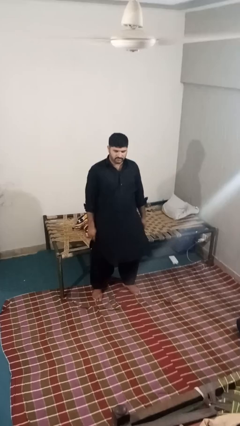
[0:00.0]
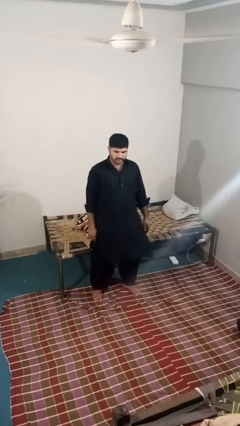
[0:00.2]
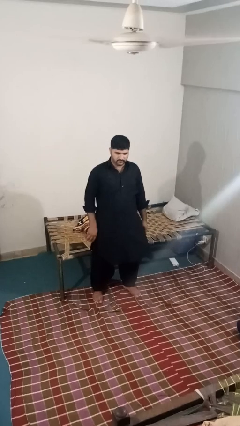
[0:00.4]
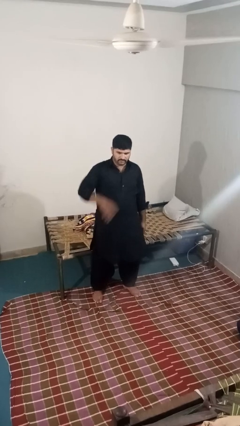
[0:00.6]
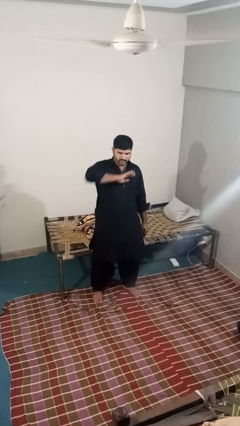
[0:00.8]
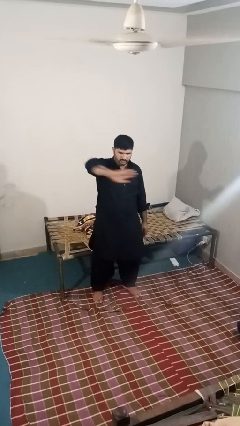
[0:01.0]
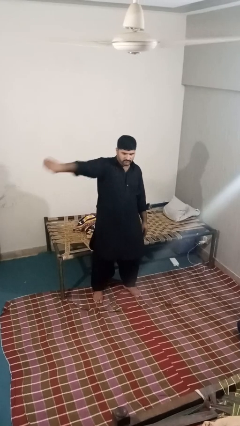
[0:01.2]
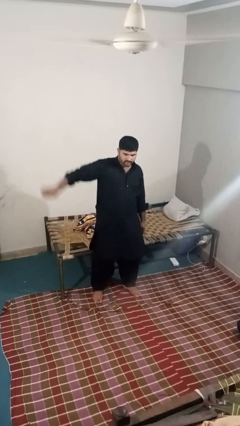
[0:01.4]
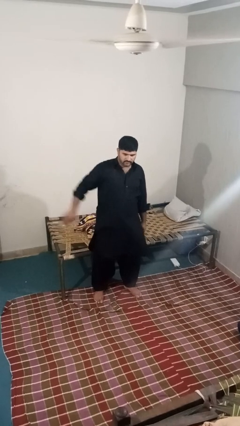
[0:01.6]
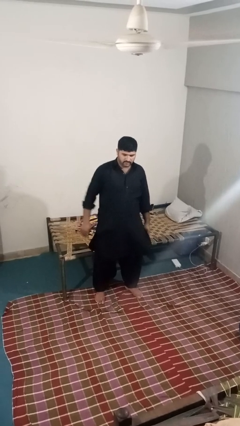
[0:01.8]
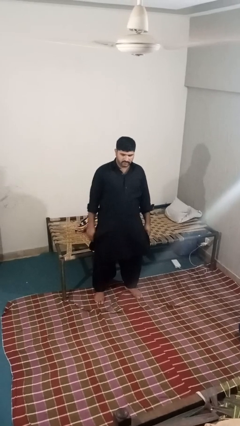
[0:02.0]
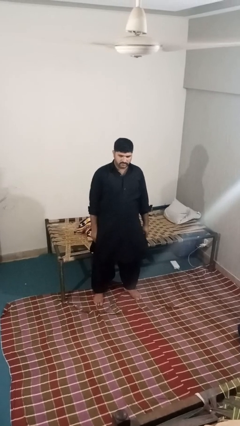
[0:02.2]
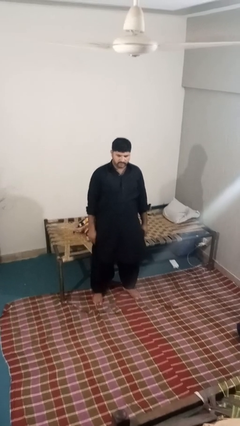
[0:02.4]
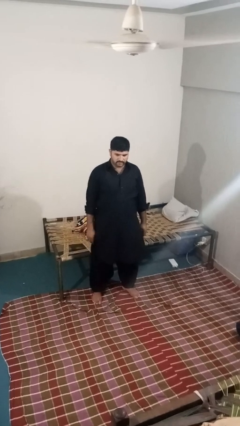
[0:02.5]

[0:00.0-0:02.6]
person gestures swipe right

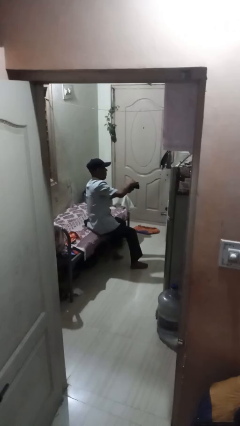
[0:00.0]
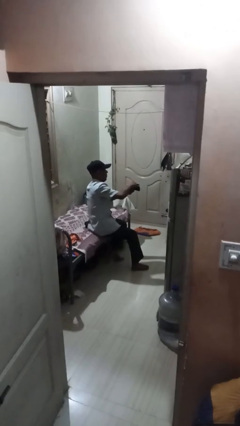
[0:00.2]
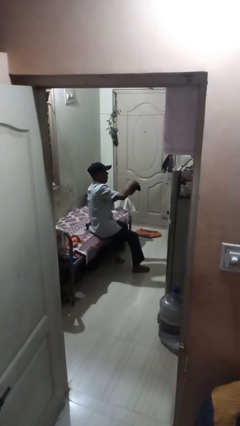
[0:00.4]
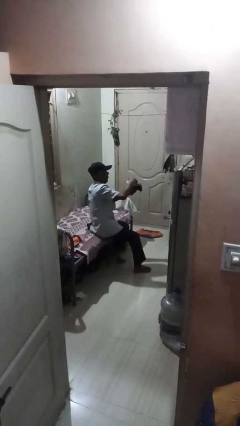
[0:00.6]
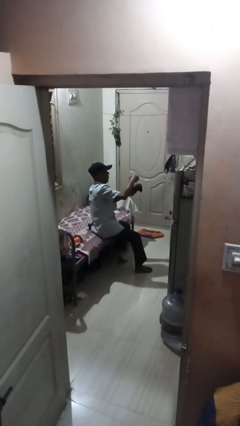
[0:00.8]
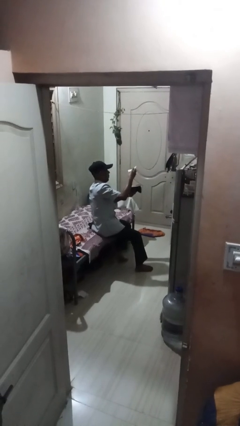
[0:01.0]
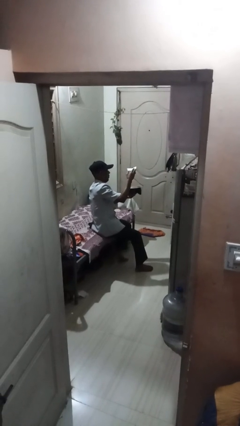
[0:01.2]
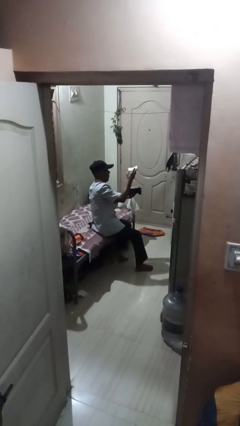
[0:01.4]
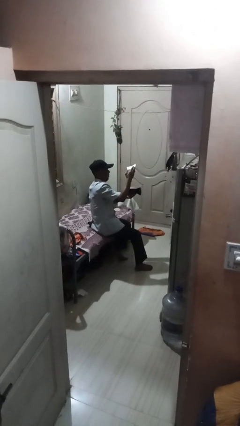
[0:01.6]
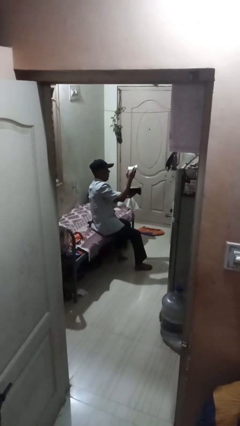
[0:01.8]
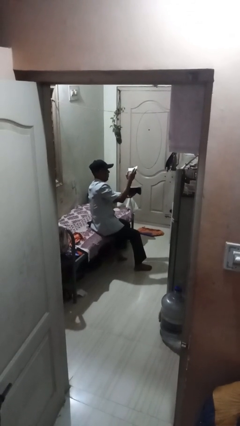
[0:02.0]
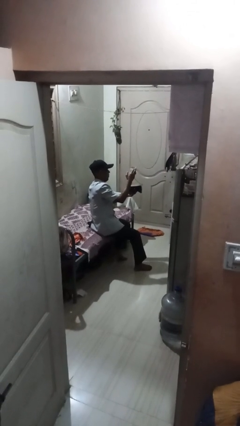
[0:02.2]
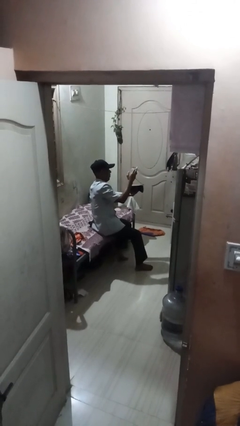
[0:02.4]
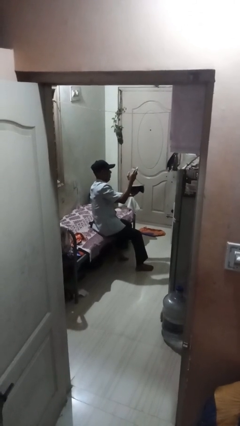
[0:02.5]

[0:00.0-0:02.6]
person takes object from purse

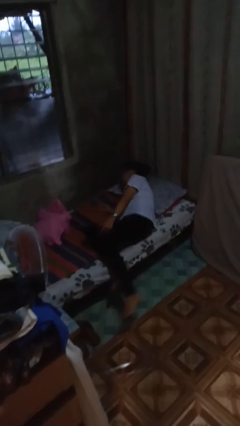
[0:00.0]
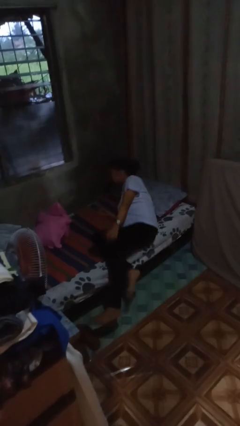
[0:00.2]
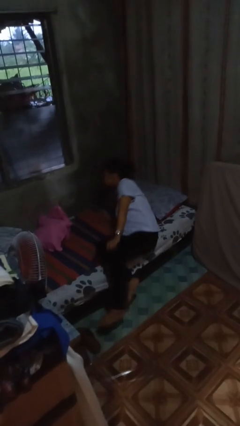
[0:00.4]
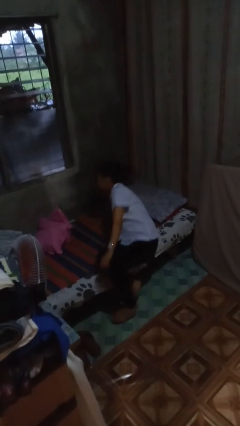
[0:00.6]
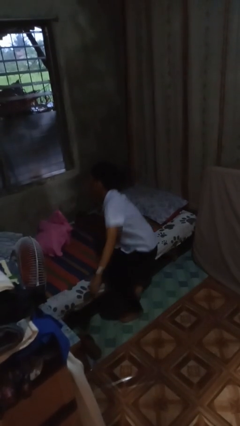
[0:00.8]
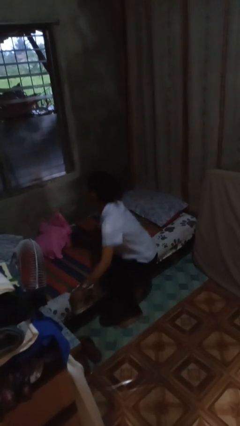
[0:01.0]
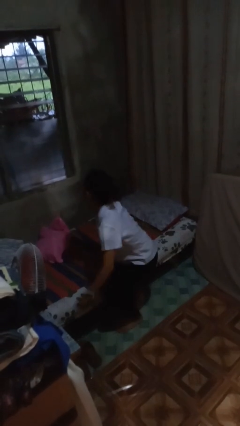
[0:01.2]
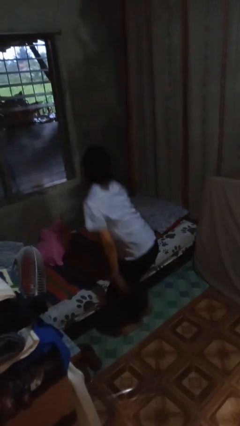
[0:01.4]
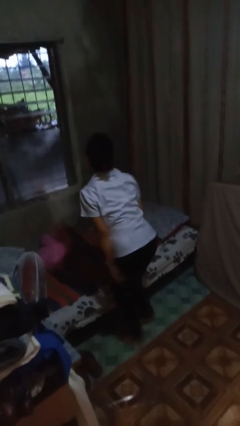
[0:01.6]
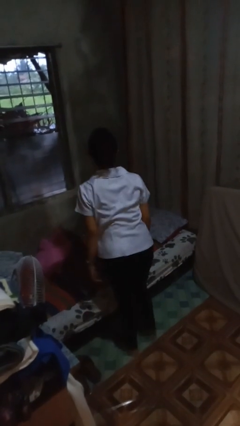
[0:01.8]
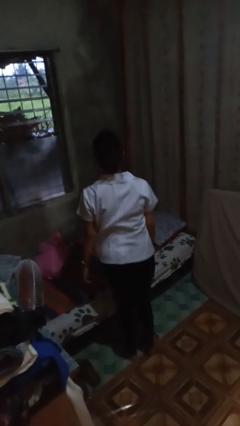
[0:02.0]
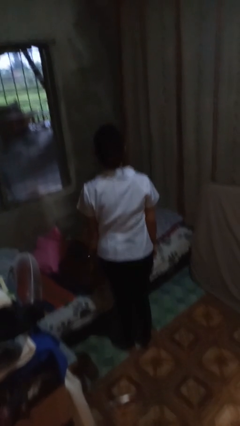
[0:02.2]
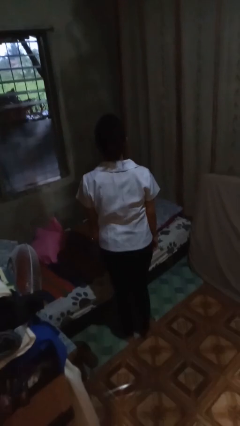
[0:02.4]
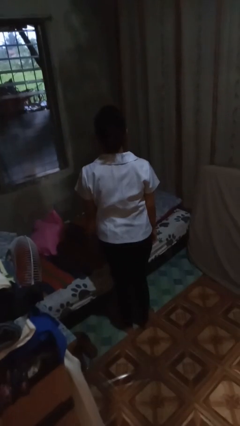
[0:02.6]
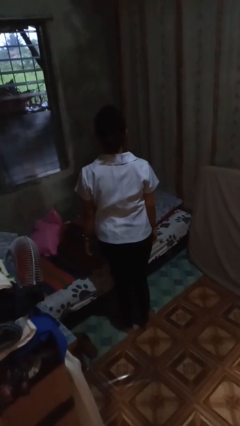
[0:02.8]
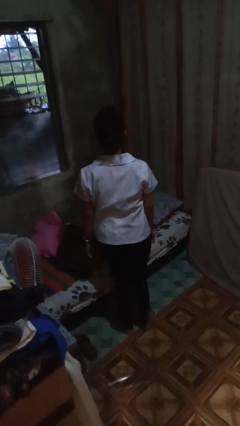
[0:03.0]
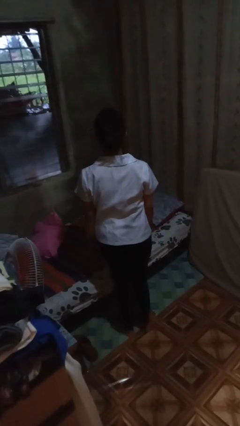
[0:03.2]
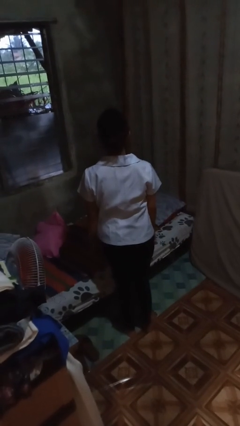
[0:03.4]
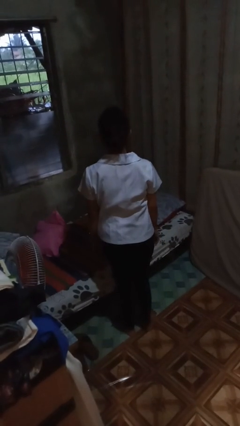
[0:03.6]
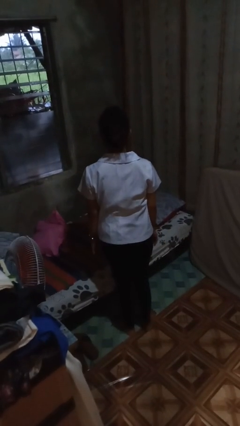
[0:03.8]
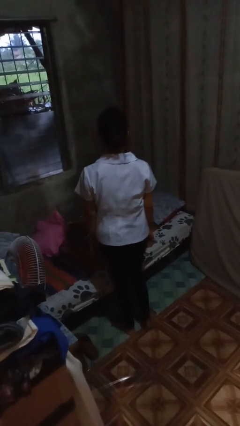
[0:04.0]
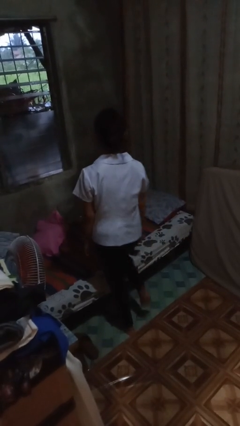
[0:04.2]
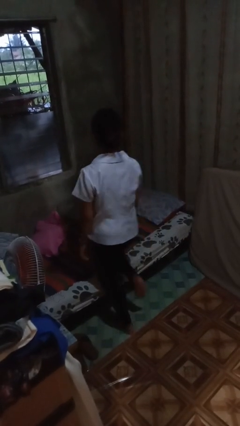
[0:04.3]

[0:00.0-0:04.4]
person stands up

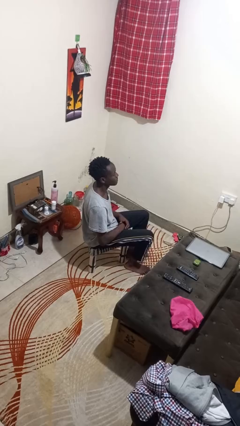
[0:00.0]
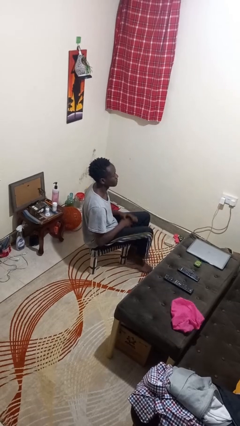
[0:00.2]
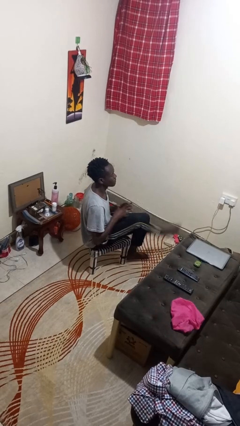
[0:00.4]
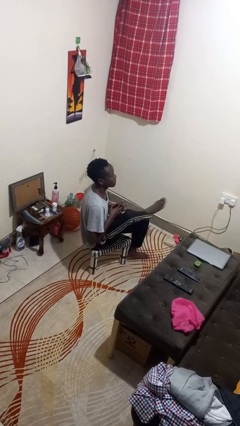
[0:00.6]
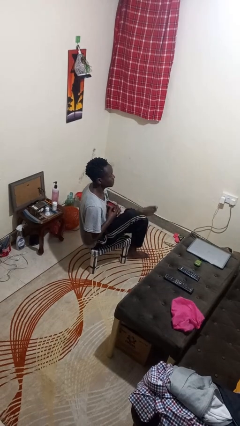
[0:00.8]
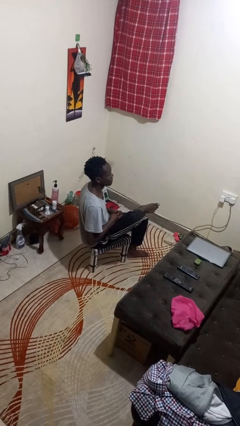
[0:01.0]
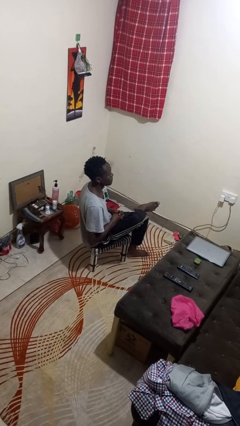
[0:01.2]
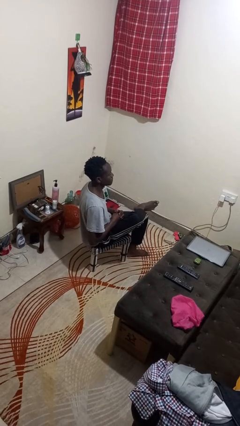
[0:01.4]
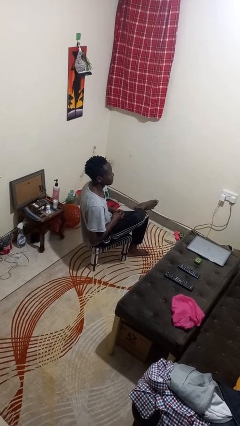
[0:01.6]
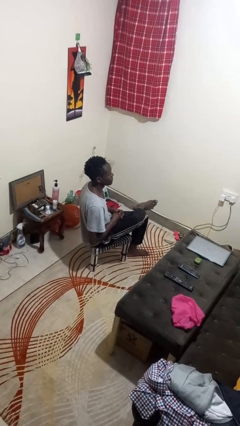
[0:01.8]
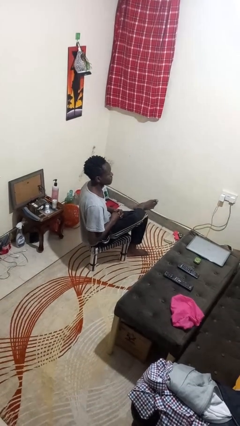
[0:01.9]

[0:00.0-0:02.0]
person crosses legs

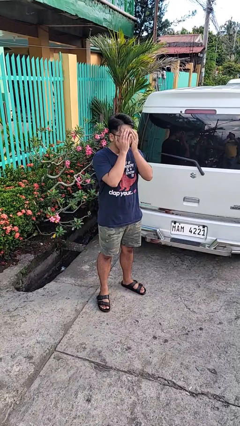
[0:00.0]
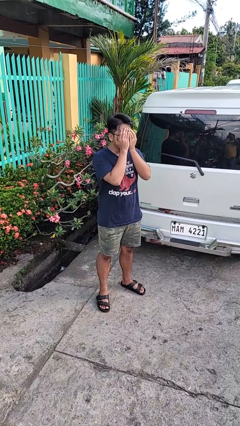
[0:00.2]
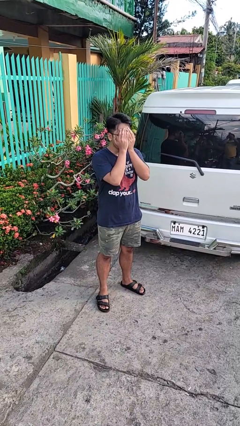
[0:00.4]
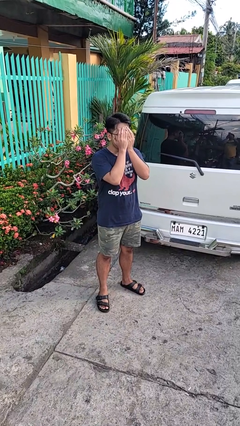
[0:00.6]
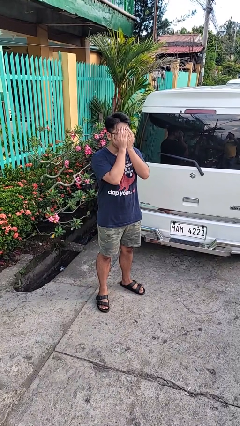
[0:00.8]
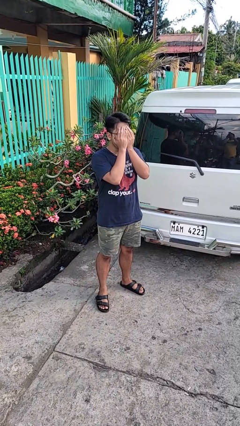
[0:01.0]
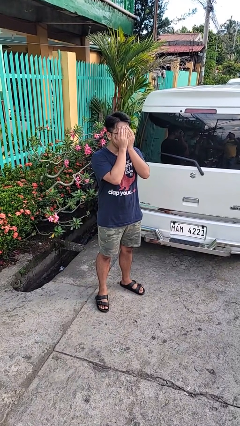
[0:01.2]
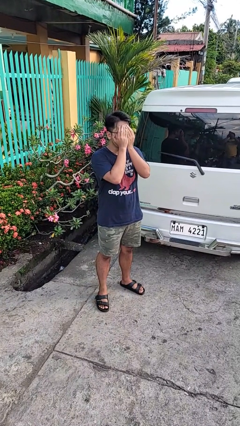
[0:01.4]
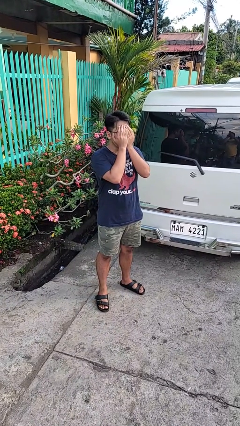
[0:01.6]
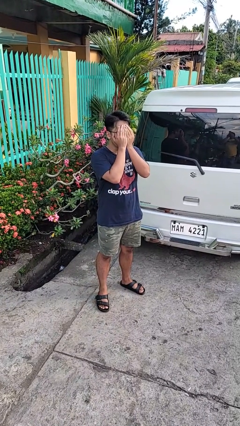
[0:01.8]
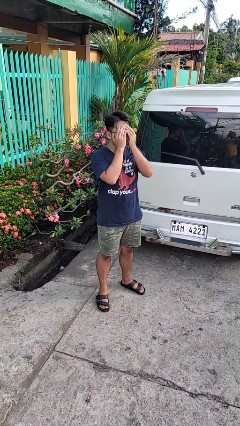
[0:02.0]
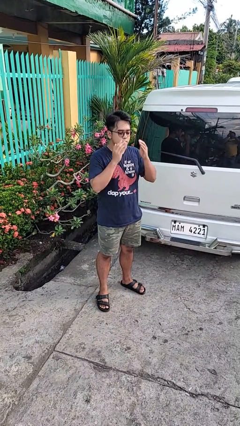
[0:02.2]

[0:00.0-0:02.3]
person covers face with hands

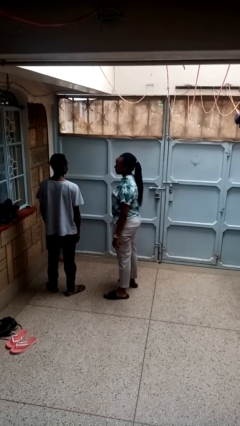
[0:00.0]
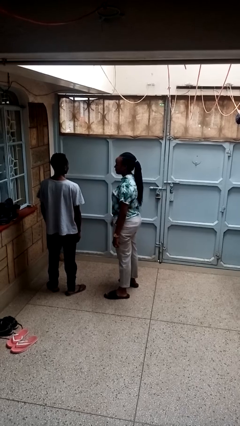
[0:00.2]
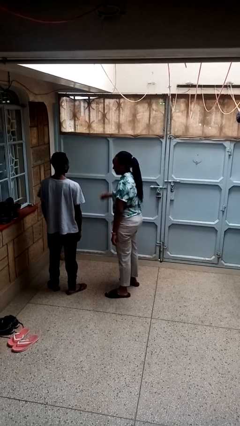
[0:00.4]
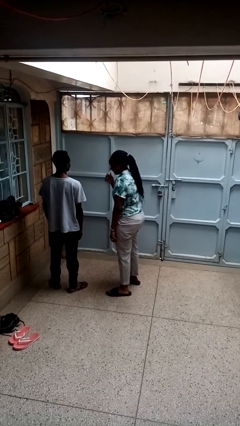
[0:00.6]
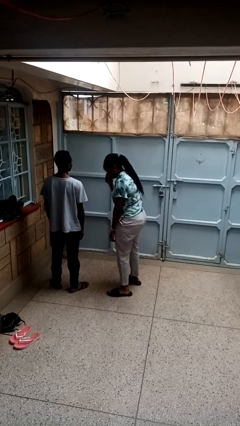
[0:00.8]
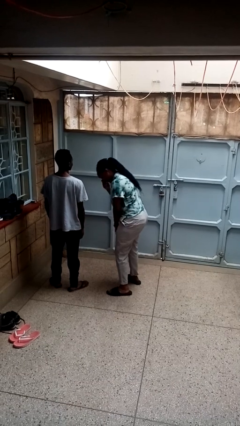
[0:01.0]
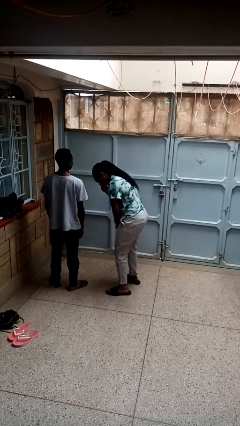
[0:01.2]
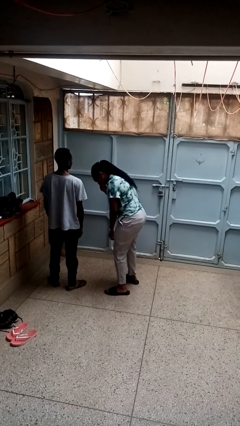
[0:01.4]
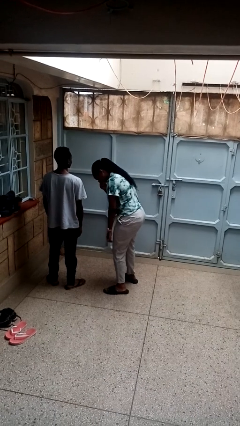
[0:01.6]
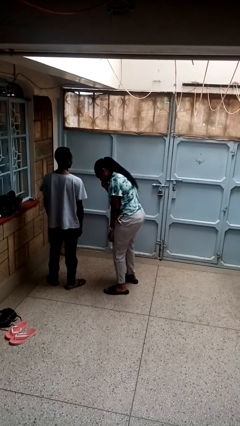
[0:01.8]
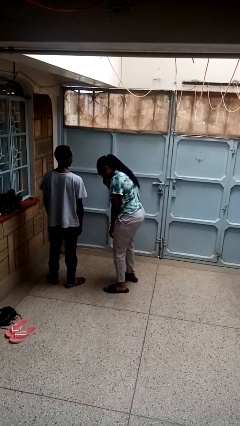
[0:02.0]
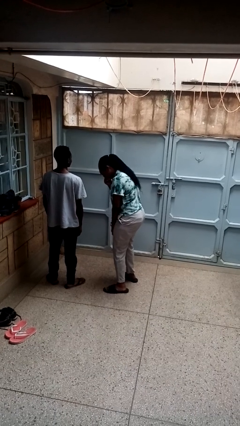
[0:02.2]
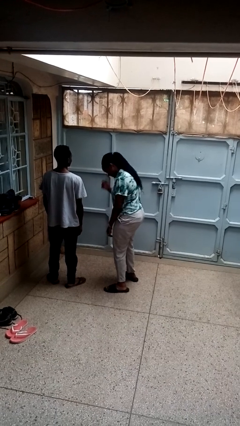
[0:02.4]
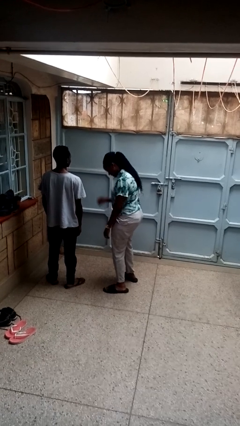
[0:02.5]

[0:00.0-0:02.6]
person laughs with person

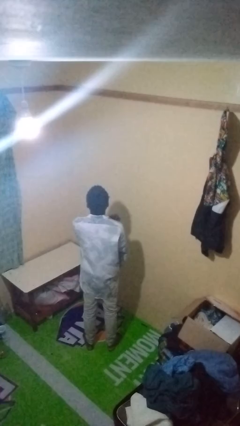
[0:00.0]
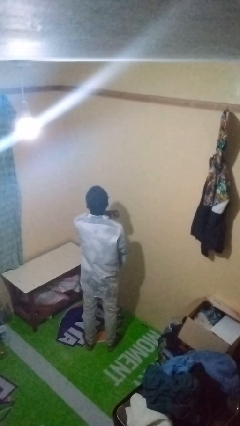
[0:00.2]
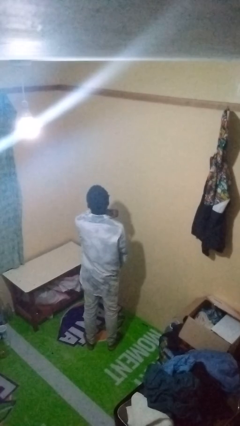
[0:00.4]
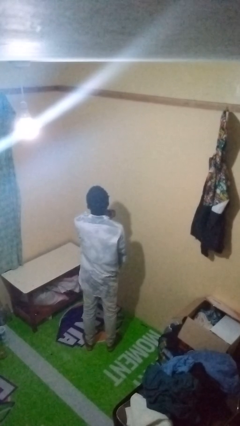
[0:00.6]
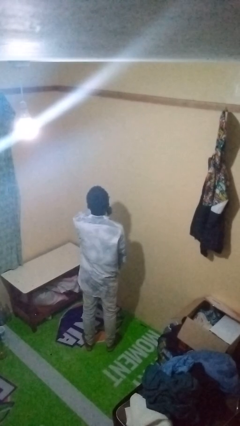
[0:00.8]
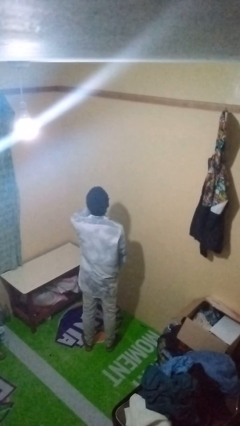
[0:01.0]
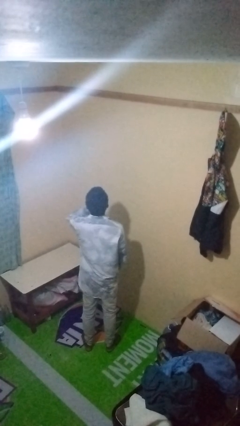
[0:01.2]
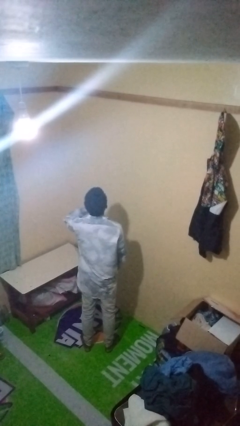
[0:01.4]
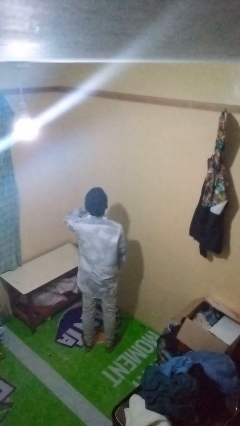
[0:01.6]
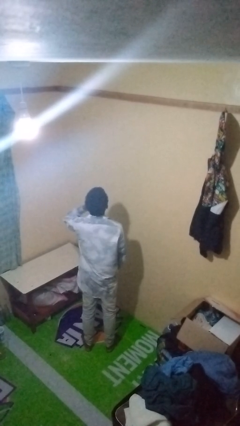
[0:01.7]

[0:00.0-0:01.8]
person gestures cut
